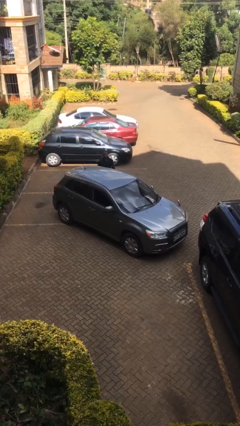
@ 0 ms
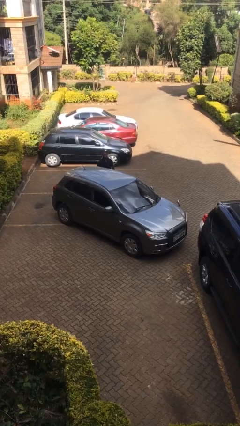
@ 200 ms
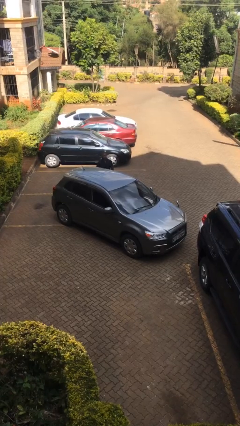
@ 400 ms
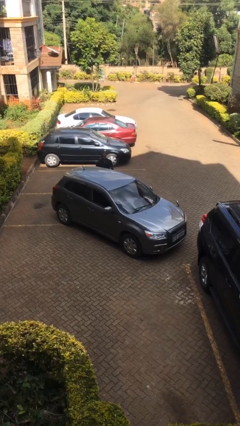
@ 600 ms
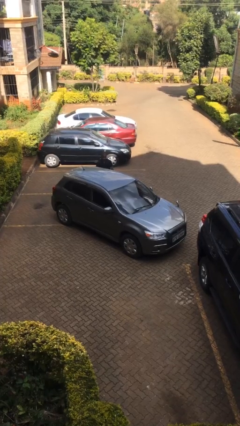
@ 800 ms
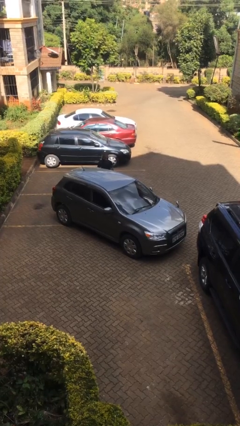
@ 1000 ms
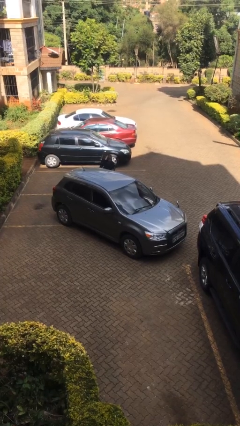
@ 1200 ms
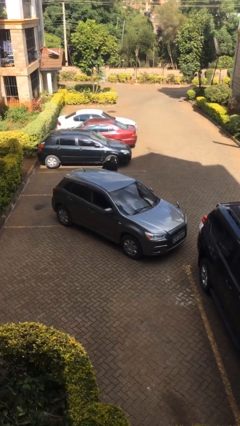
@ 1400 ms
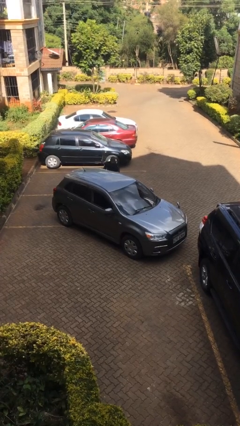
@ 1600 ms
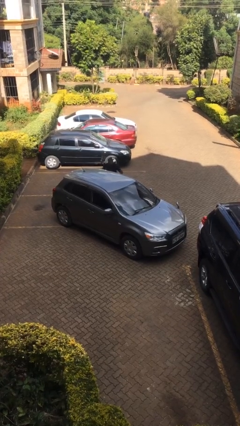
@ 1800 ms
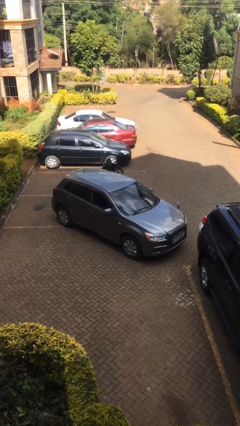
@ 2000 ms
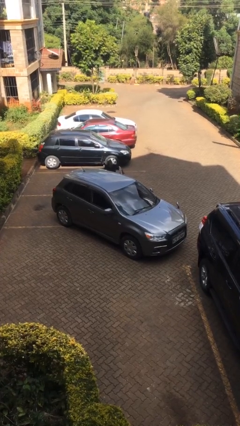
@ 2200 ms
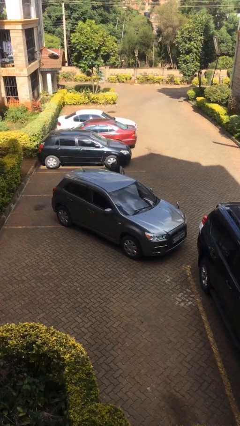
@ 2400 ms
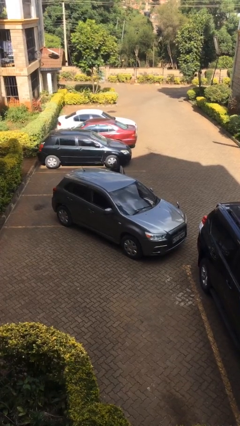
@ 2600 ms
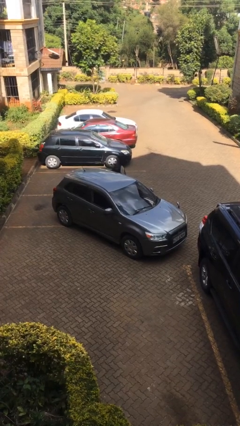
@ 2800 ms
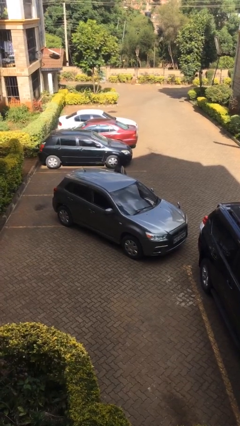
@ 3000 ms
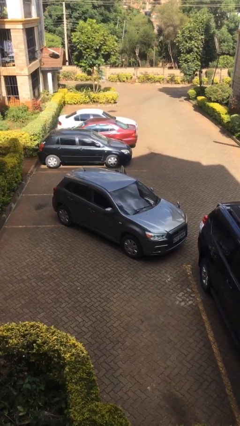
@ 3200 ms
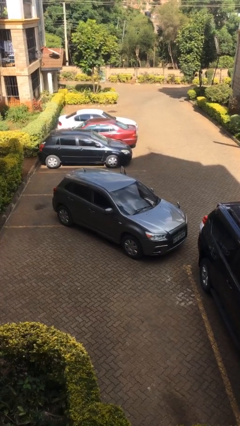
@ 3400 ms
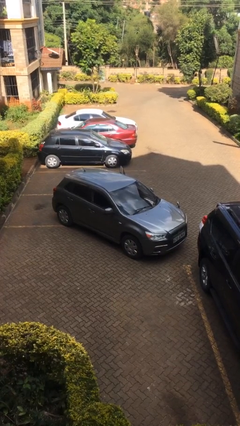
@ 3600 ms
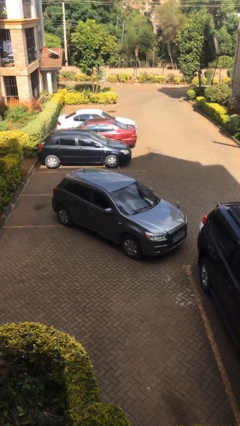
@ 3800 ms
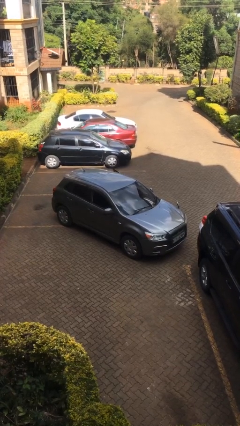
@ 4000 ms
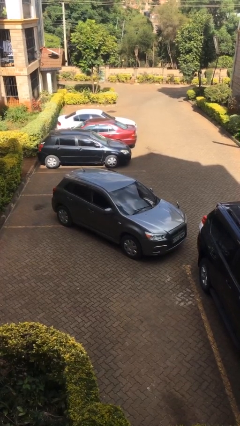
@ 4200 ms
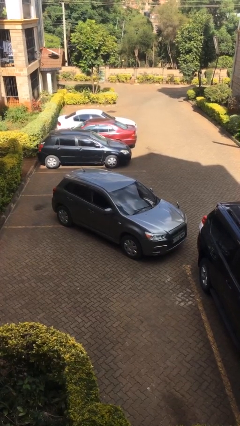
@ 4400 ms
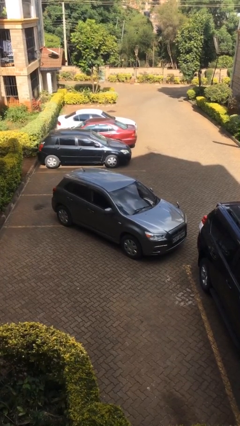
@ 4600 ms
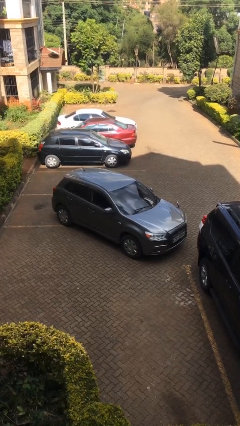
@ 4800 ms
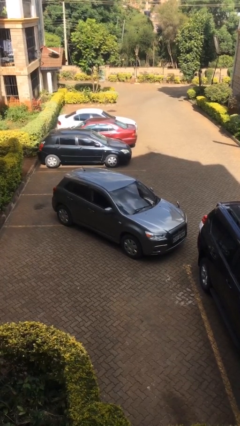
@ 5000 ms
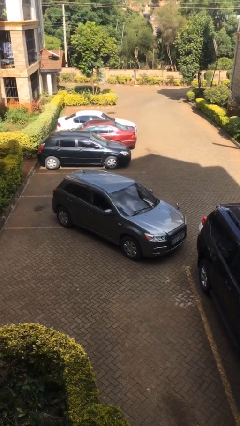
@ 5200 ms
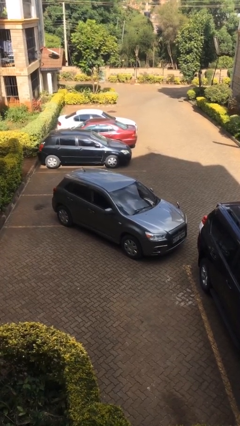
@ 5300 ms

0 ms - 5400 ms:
car picks up person

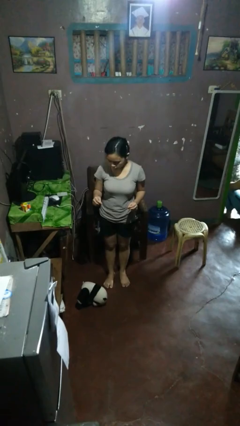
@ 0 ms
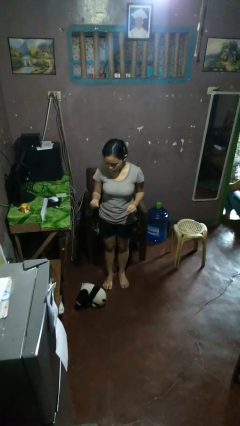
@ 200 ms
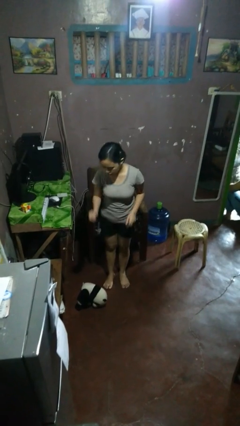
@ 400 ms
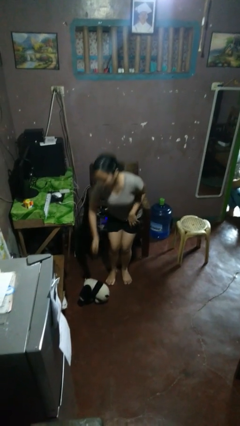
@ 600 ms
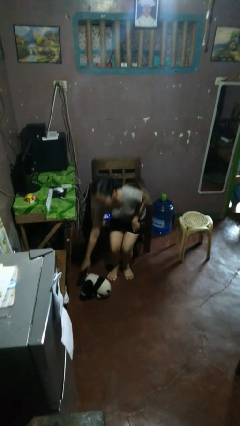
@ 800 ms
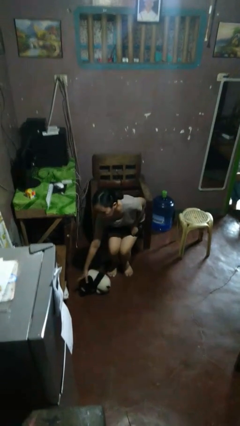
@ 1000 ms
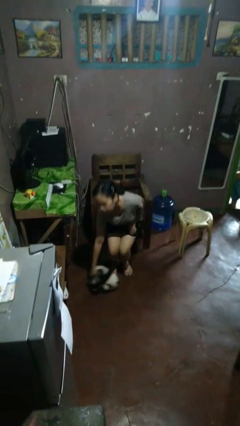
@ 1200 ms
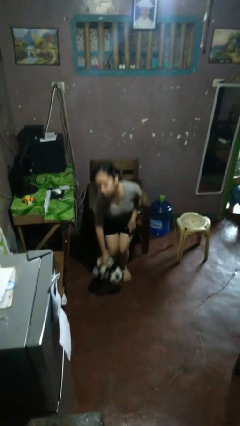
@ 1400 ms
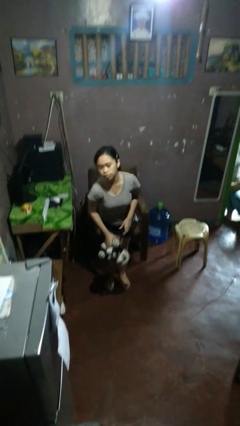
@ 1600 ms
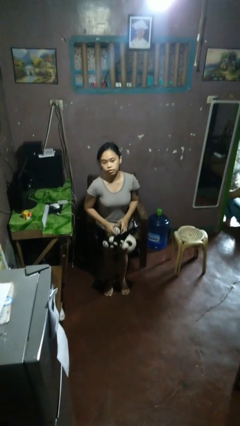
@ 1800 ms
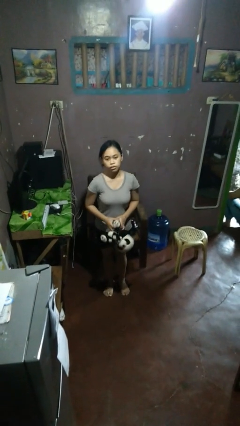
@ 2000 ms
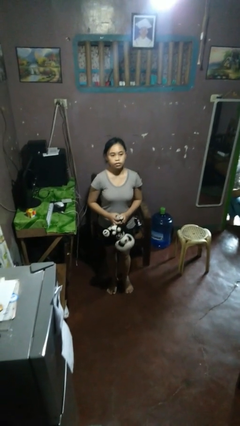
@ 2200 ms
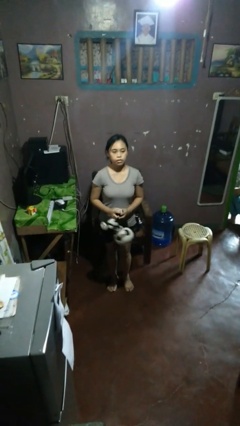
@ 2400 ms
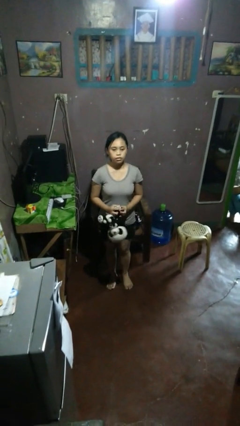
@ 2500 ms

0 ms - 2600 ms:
person picks up object from floor

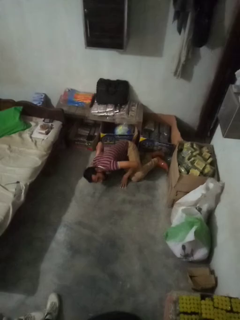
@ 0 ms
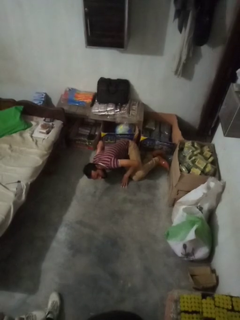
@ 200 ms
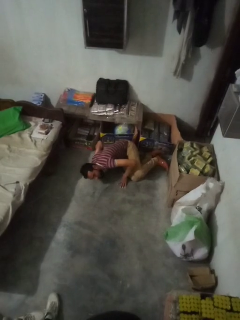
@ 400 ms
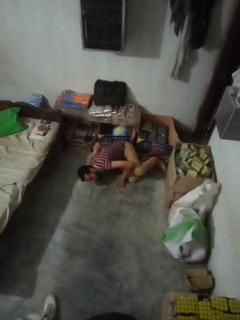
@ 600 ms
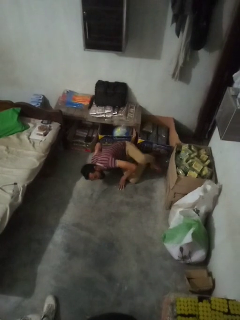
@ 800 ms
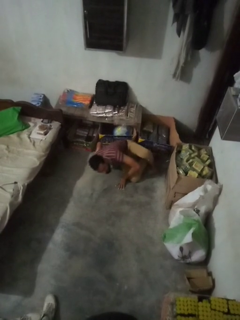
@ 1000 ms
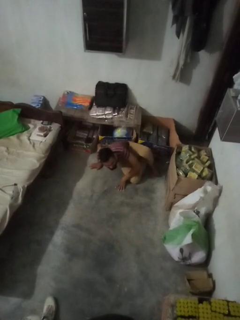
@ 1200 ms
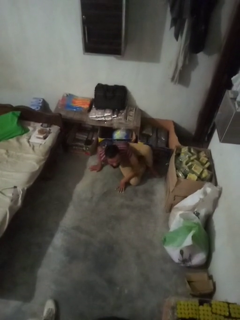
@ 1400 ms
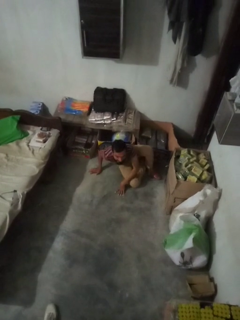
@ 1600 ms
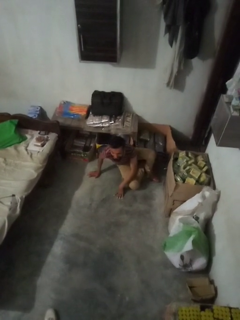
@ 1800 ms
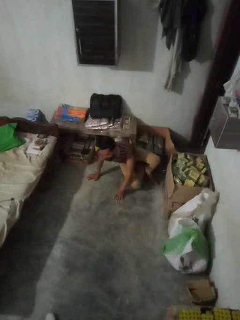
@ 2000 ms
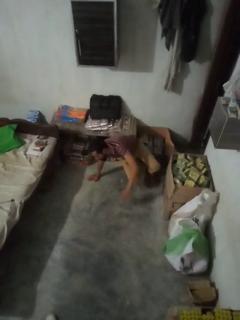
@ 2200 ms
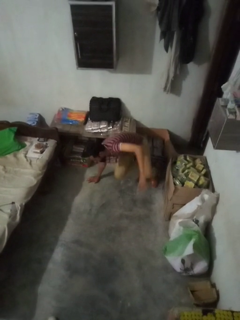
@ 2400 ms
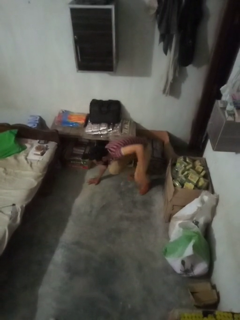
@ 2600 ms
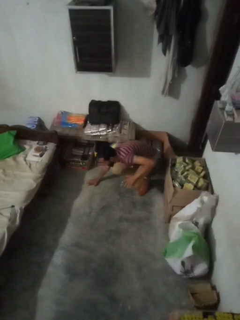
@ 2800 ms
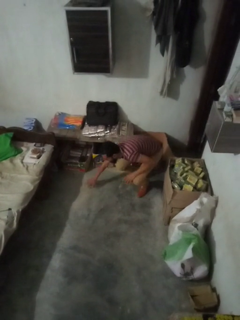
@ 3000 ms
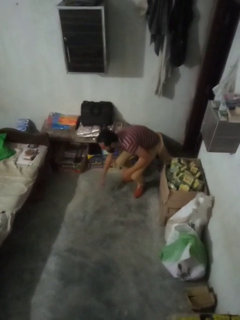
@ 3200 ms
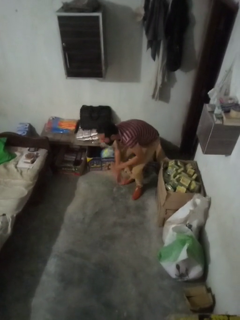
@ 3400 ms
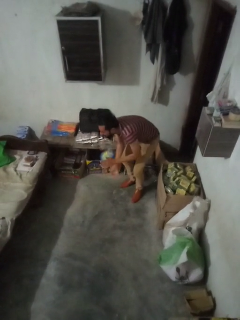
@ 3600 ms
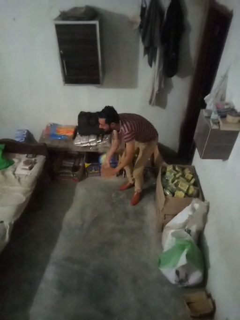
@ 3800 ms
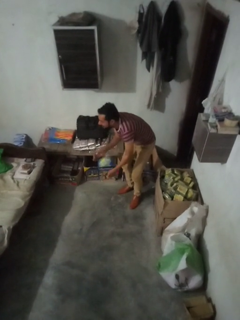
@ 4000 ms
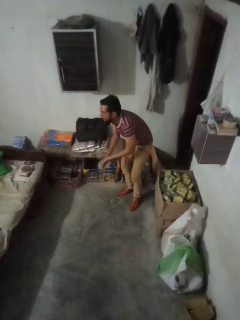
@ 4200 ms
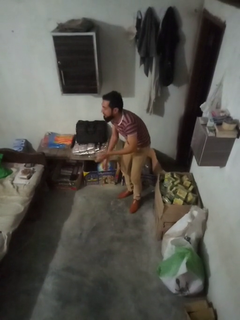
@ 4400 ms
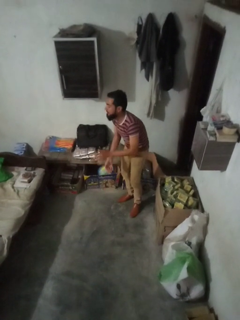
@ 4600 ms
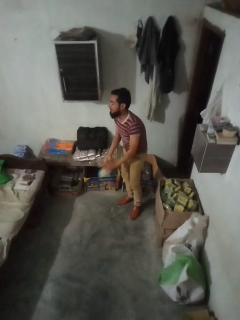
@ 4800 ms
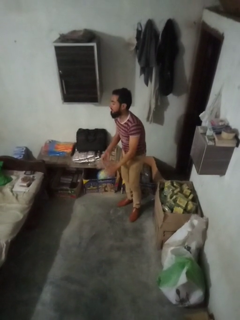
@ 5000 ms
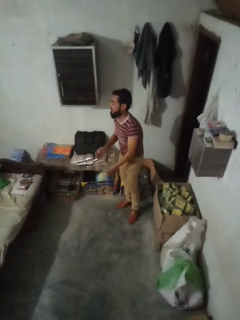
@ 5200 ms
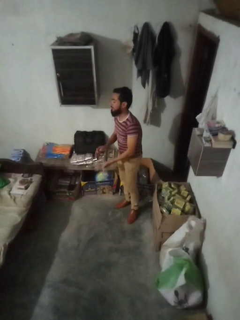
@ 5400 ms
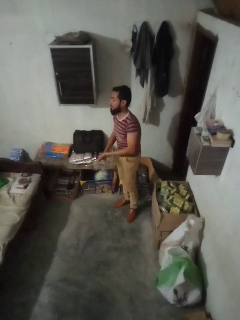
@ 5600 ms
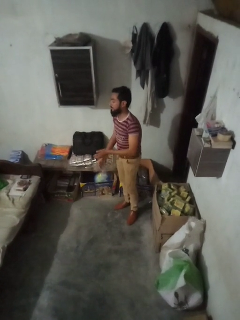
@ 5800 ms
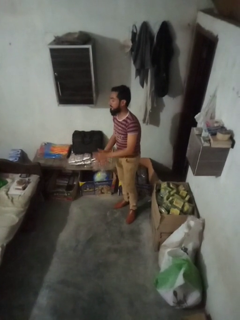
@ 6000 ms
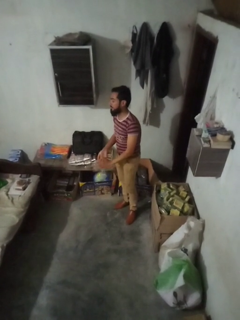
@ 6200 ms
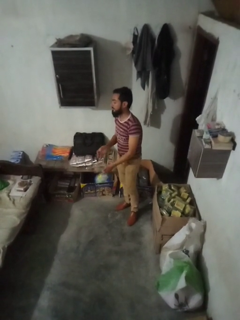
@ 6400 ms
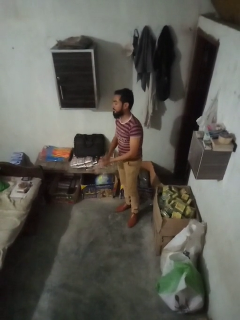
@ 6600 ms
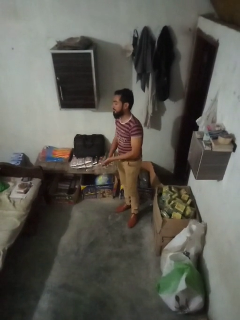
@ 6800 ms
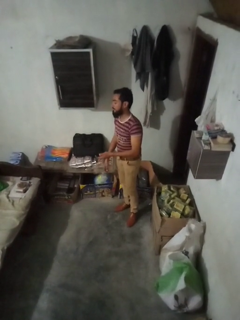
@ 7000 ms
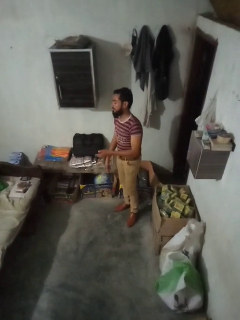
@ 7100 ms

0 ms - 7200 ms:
person stands up from floor

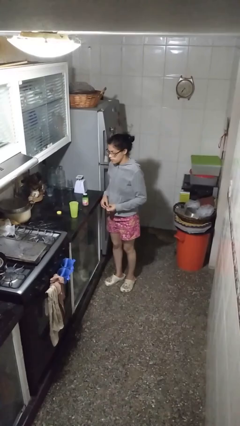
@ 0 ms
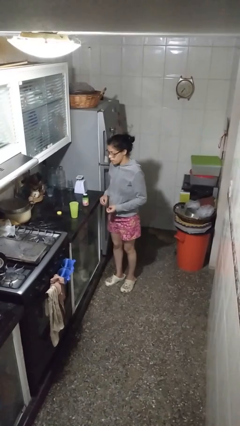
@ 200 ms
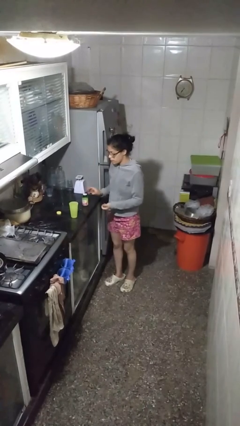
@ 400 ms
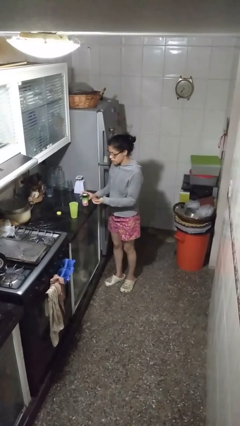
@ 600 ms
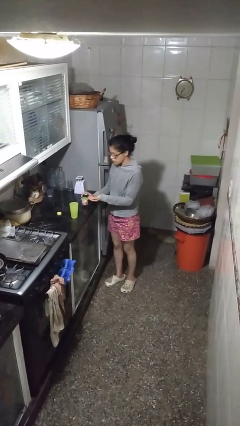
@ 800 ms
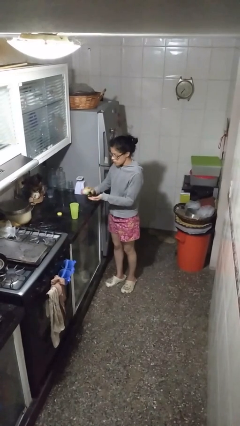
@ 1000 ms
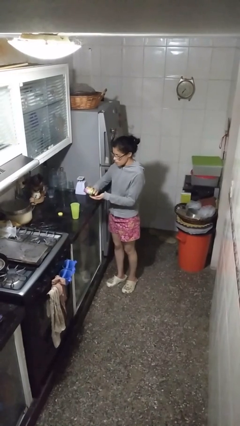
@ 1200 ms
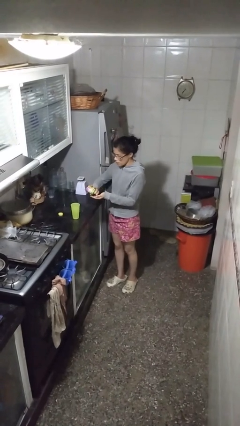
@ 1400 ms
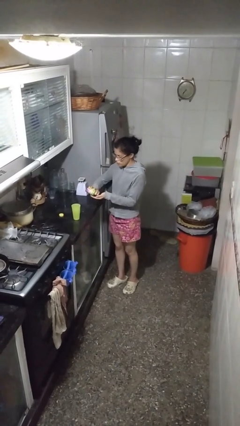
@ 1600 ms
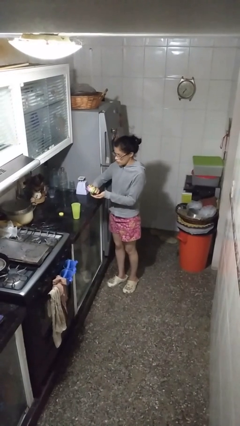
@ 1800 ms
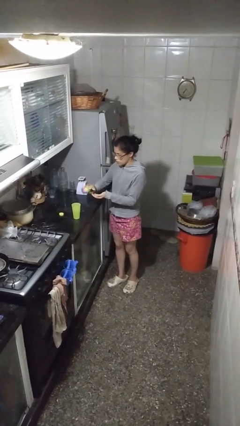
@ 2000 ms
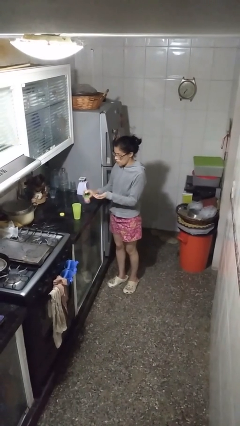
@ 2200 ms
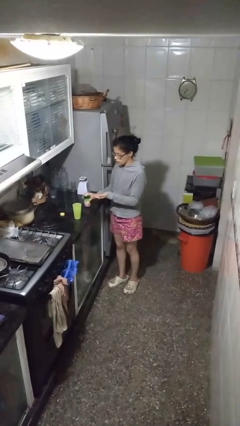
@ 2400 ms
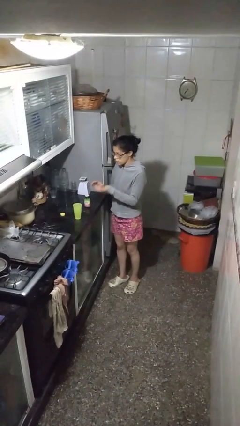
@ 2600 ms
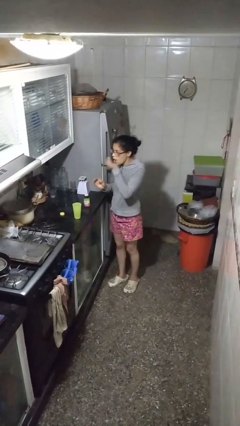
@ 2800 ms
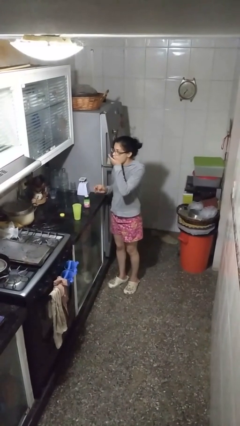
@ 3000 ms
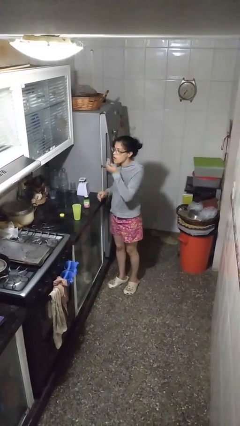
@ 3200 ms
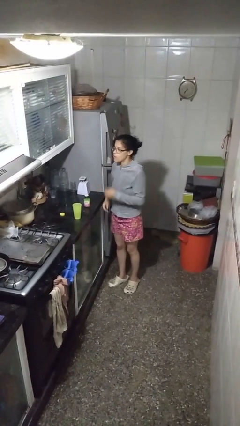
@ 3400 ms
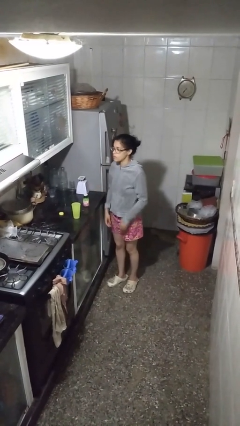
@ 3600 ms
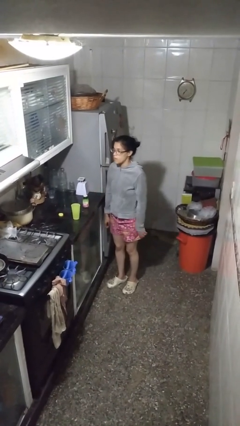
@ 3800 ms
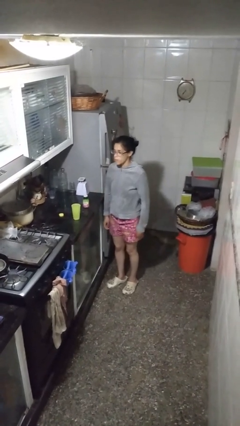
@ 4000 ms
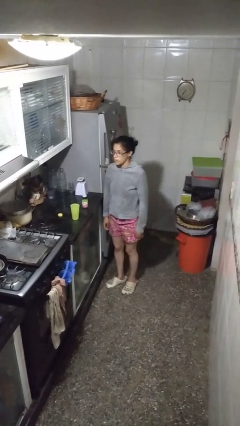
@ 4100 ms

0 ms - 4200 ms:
person takes medicine pills
